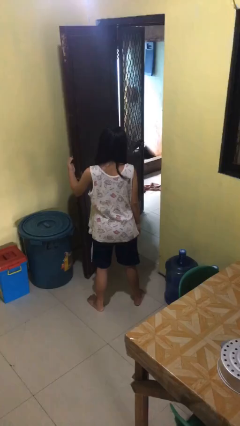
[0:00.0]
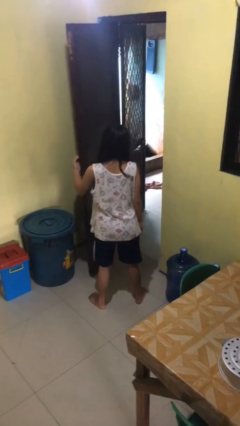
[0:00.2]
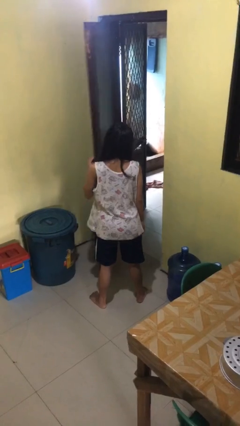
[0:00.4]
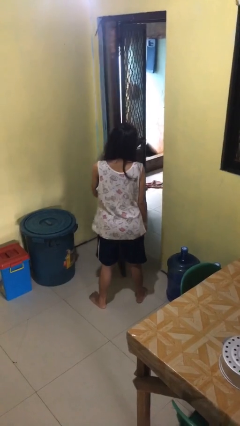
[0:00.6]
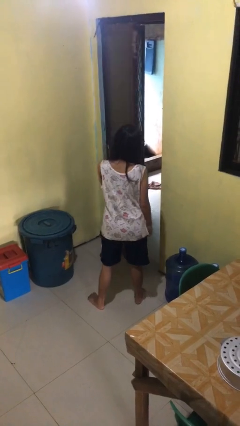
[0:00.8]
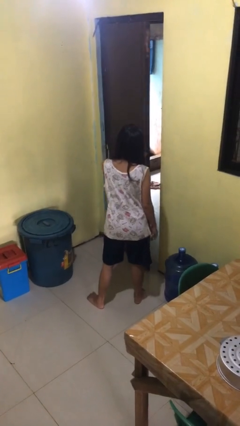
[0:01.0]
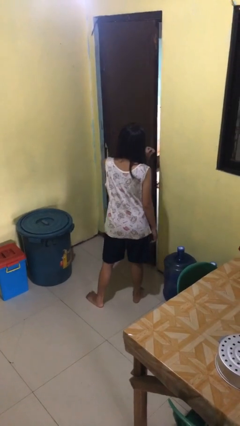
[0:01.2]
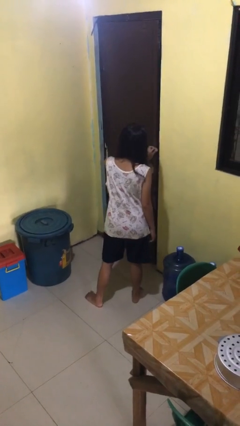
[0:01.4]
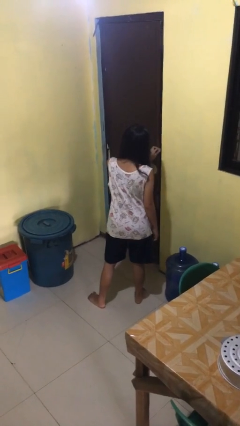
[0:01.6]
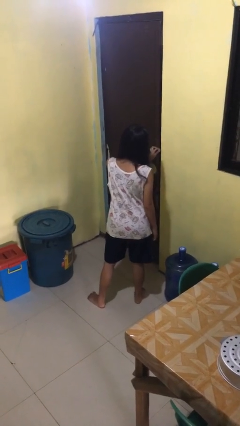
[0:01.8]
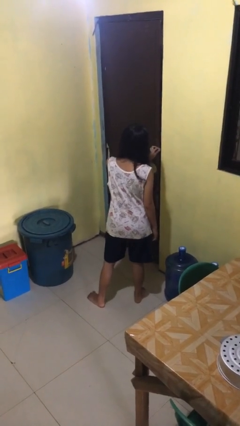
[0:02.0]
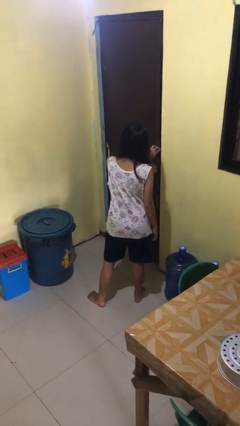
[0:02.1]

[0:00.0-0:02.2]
person closes facility door

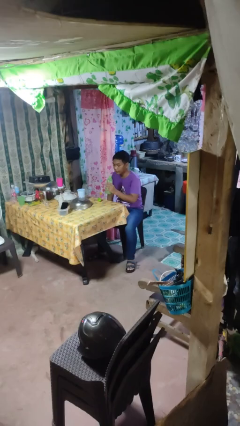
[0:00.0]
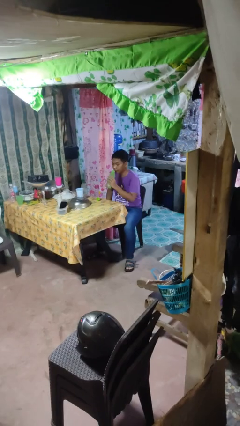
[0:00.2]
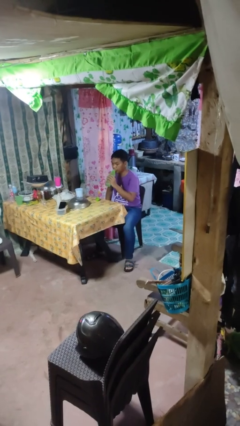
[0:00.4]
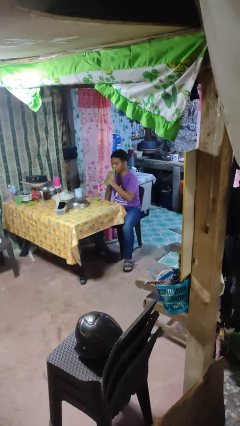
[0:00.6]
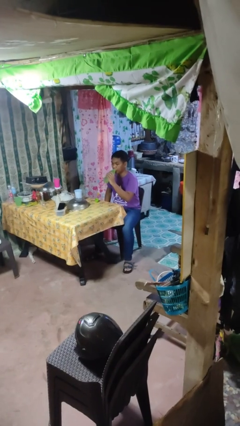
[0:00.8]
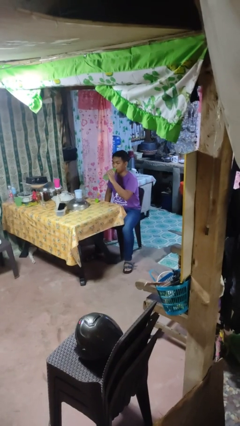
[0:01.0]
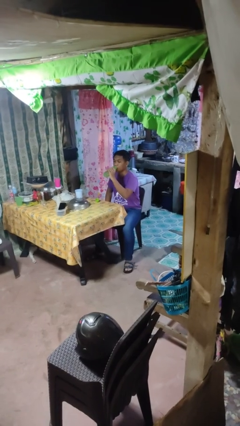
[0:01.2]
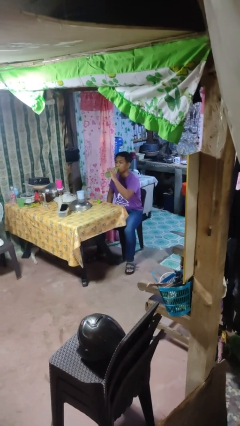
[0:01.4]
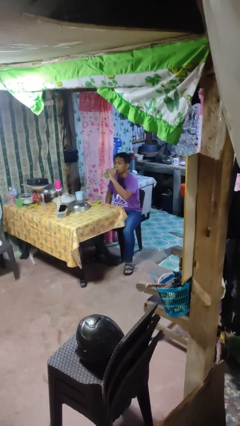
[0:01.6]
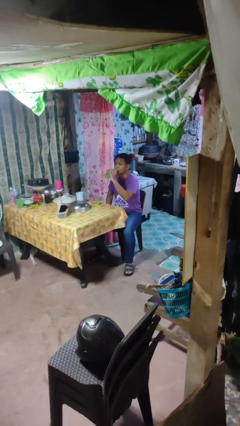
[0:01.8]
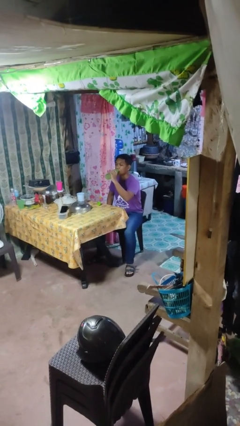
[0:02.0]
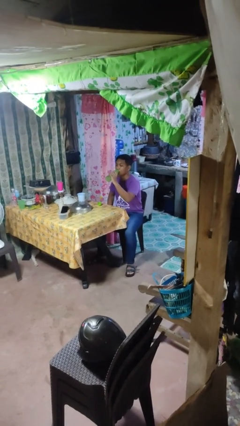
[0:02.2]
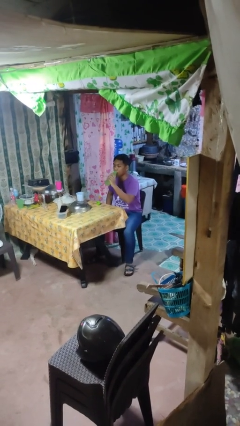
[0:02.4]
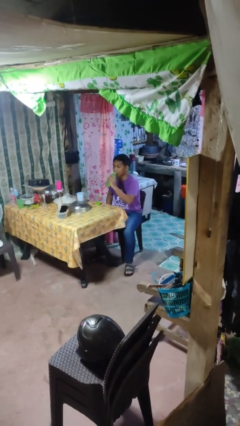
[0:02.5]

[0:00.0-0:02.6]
person drinks from bottle

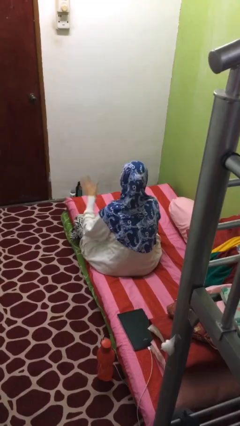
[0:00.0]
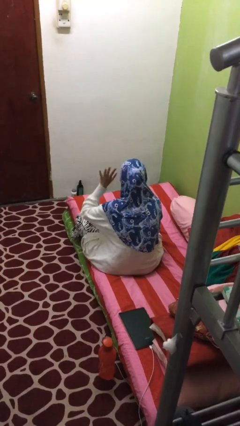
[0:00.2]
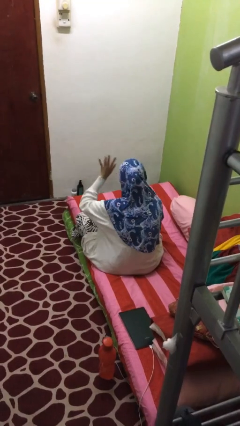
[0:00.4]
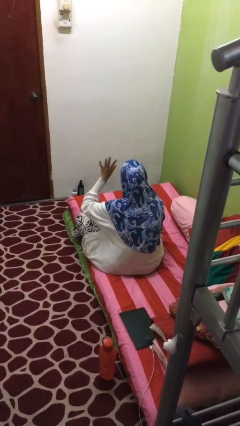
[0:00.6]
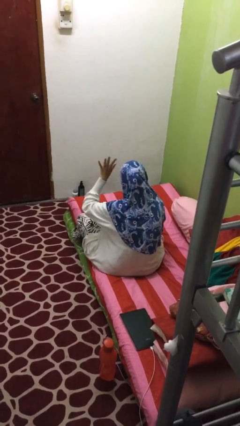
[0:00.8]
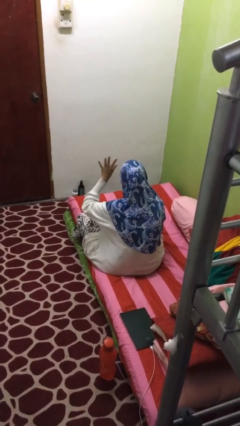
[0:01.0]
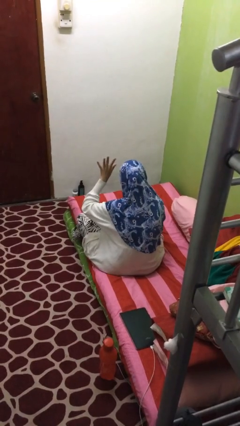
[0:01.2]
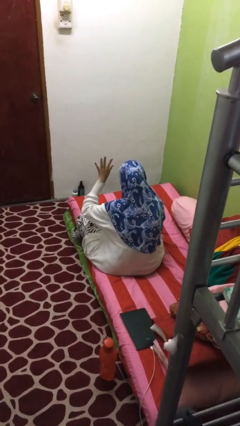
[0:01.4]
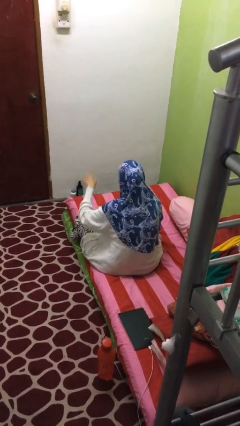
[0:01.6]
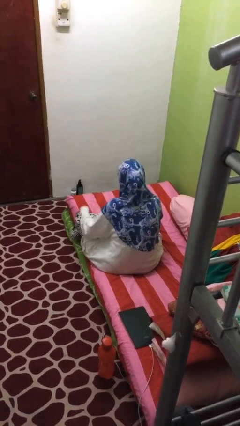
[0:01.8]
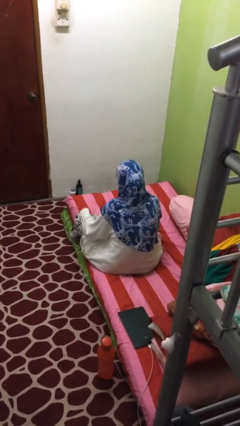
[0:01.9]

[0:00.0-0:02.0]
person gestures number five

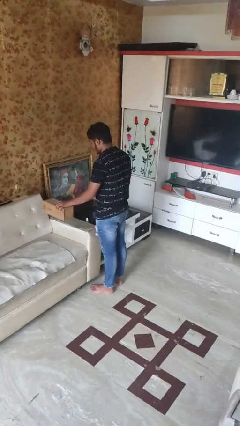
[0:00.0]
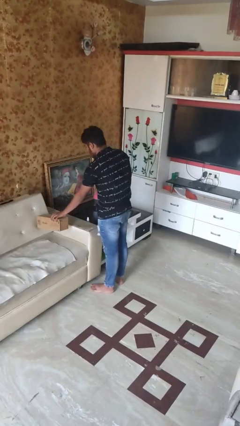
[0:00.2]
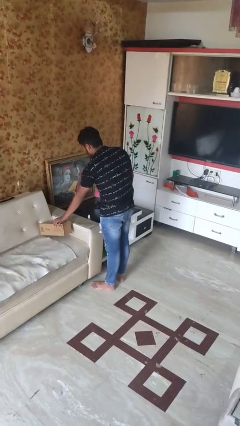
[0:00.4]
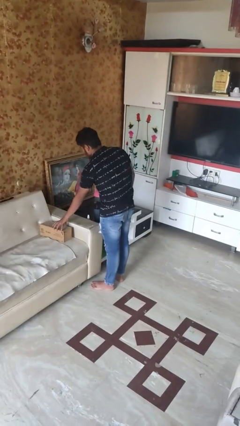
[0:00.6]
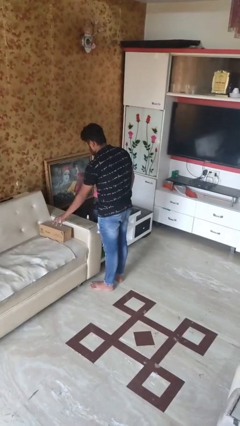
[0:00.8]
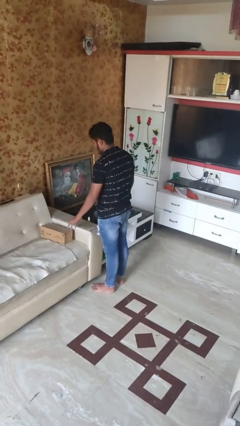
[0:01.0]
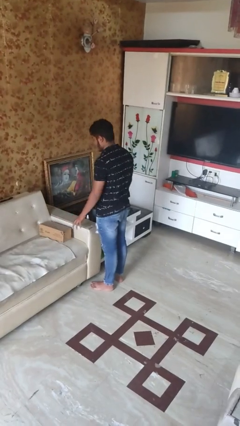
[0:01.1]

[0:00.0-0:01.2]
person puts down object on couch

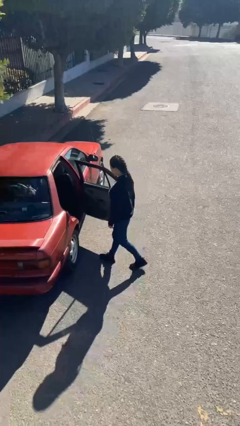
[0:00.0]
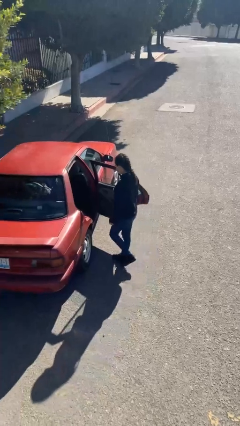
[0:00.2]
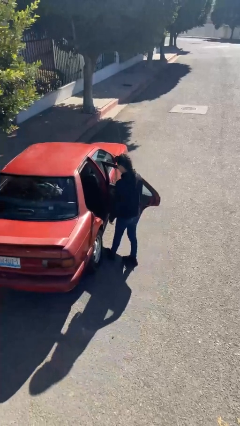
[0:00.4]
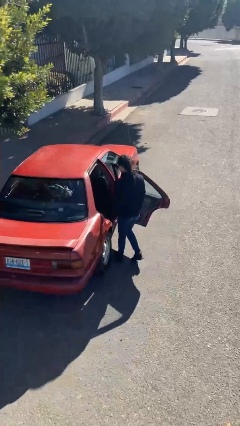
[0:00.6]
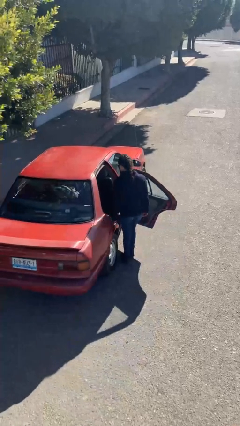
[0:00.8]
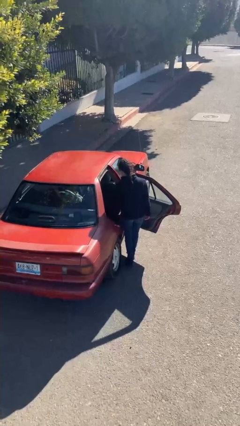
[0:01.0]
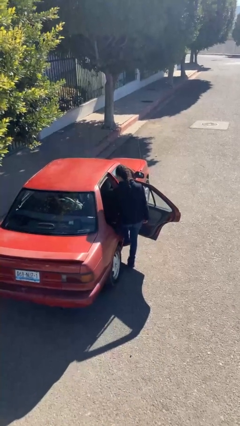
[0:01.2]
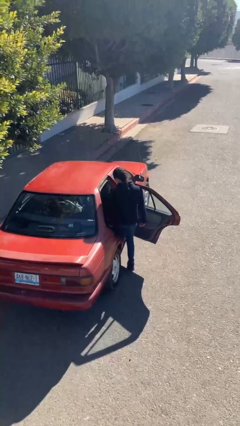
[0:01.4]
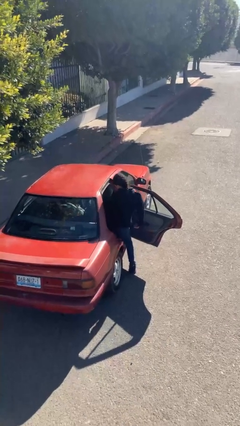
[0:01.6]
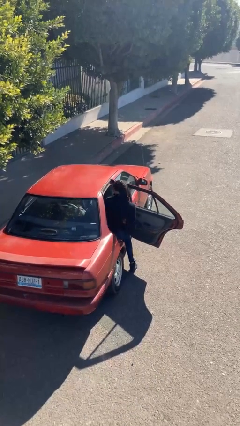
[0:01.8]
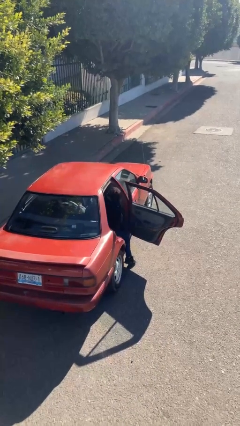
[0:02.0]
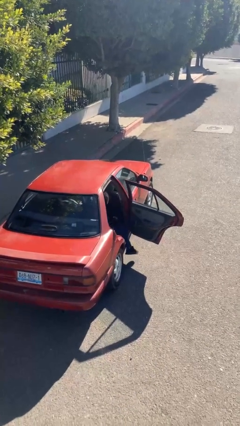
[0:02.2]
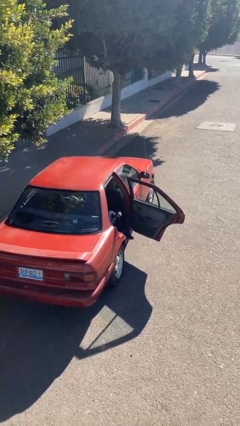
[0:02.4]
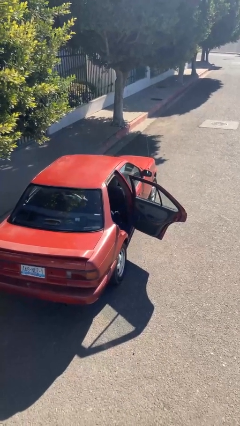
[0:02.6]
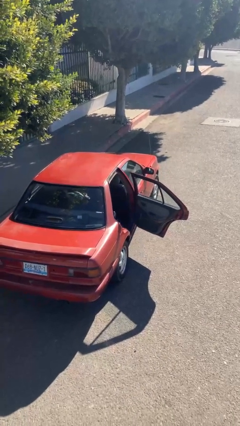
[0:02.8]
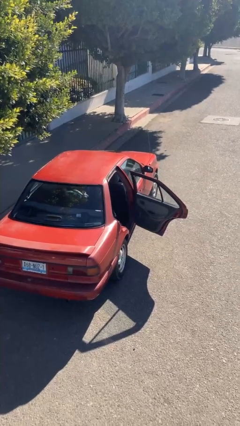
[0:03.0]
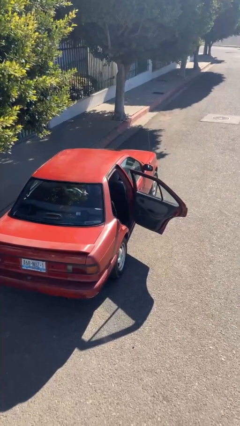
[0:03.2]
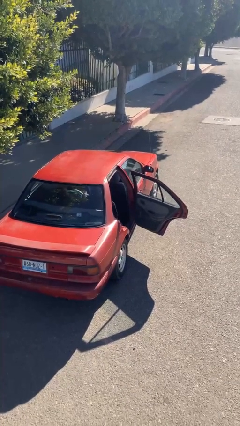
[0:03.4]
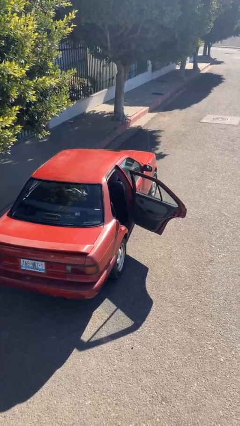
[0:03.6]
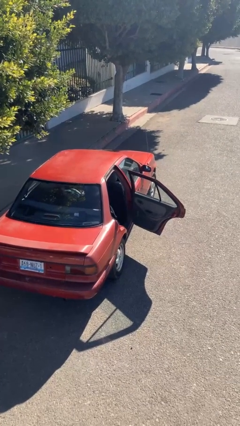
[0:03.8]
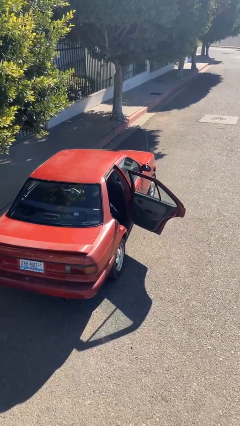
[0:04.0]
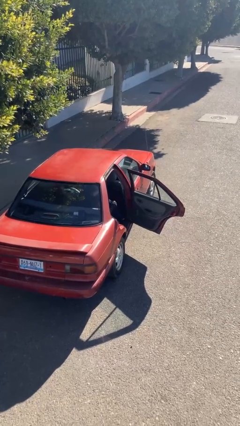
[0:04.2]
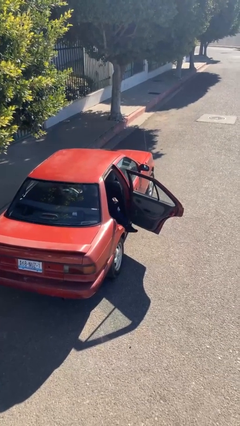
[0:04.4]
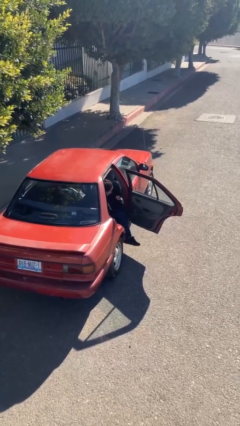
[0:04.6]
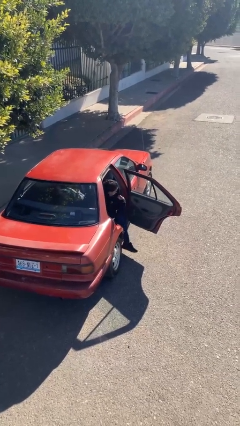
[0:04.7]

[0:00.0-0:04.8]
person enters car

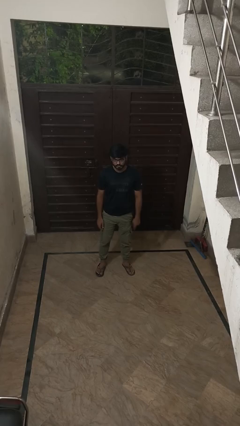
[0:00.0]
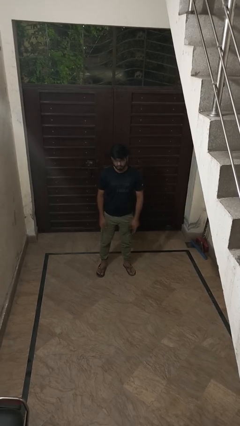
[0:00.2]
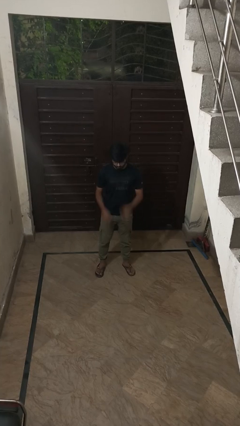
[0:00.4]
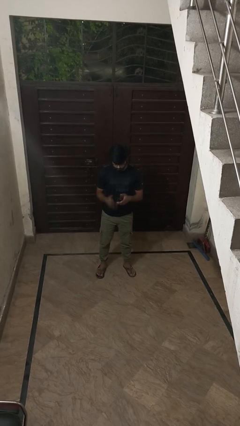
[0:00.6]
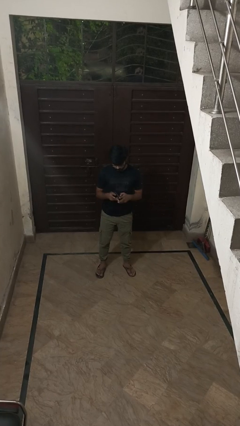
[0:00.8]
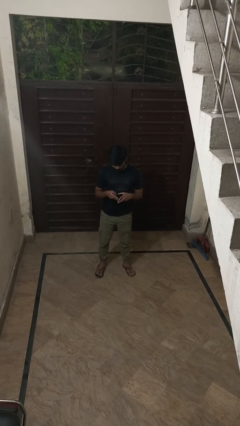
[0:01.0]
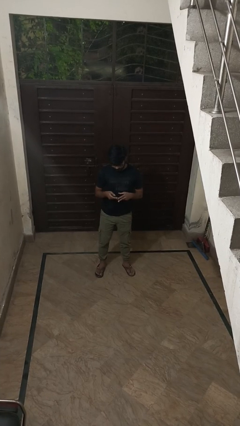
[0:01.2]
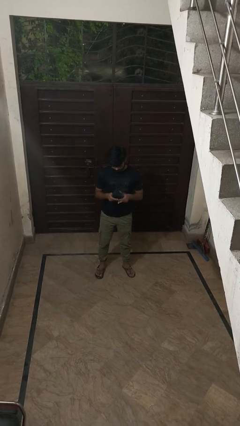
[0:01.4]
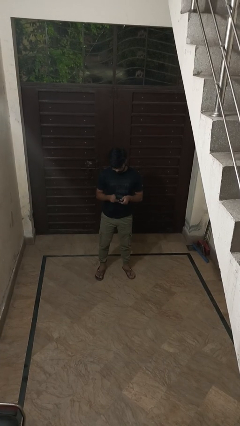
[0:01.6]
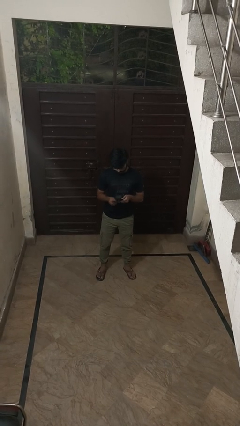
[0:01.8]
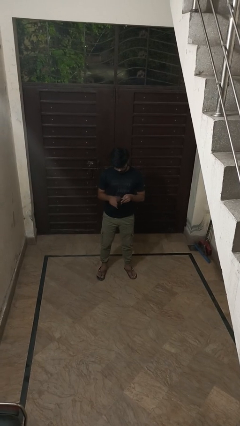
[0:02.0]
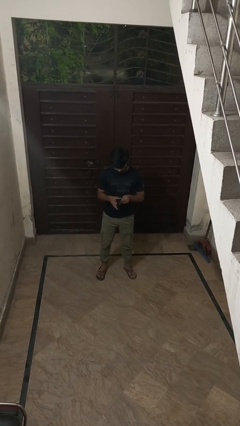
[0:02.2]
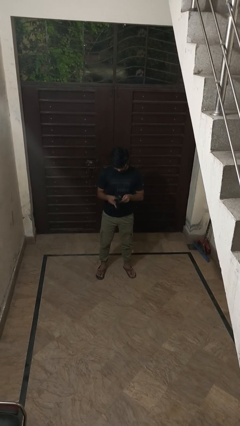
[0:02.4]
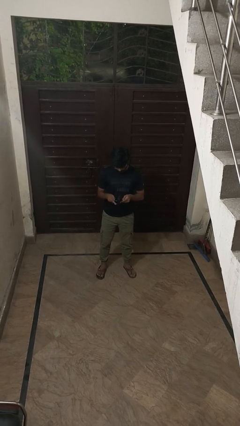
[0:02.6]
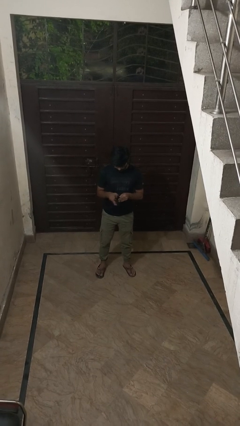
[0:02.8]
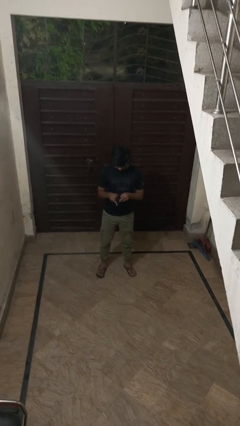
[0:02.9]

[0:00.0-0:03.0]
person searches in purse

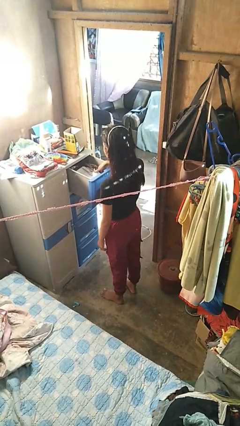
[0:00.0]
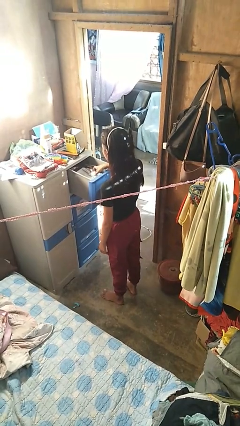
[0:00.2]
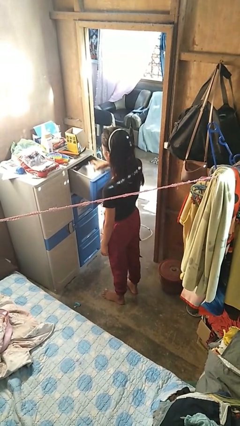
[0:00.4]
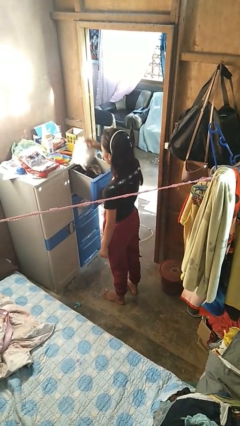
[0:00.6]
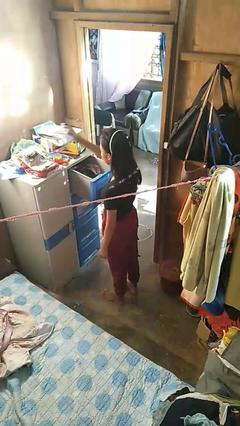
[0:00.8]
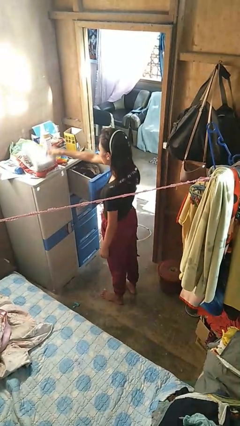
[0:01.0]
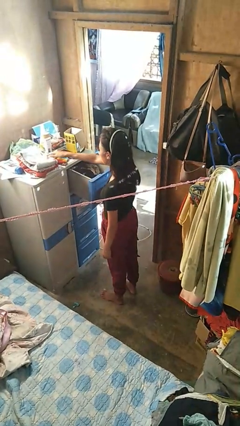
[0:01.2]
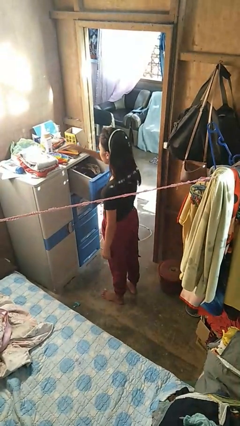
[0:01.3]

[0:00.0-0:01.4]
person takes clothes from dresser
